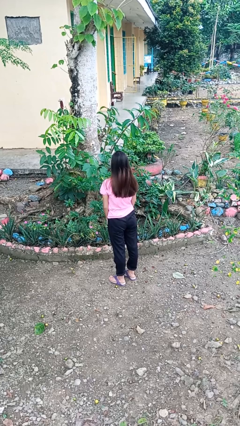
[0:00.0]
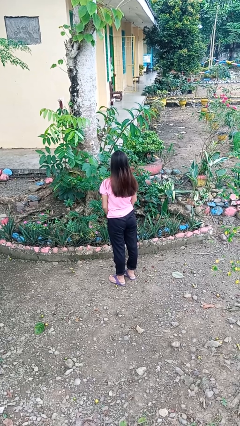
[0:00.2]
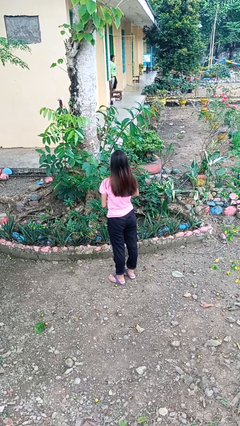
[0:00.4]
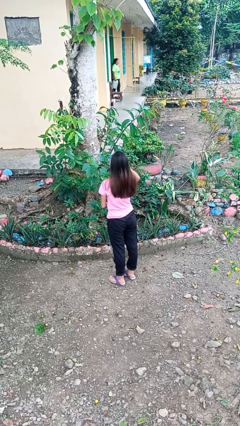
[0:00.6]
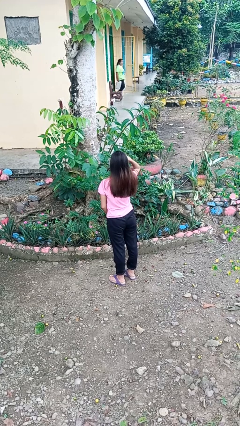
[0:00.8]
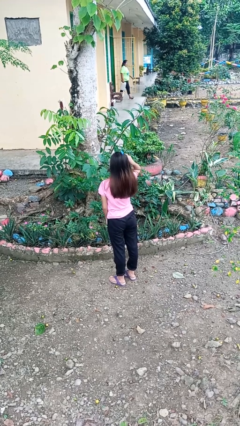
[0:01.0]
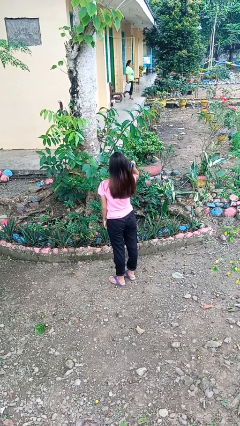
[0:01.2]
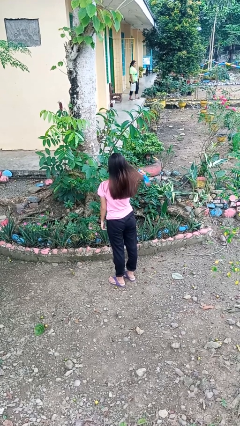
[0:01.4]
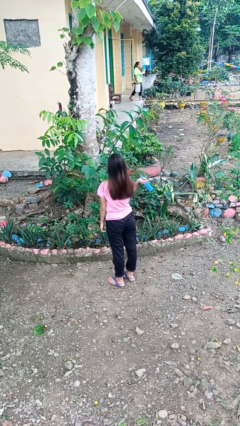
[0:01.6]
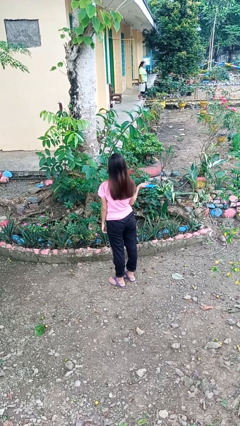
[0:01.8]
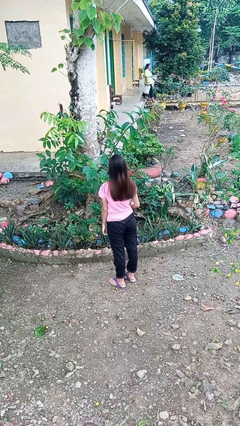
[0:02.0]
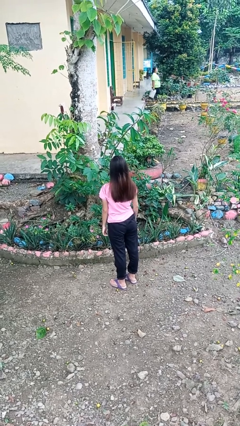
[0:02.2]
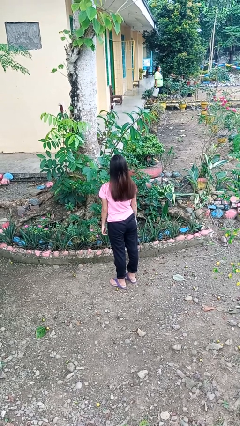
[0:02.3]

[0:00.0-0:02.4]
person brushes hair

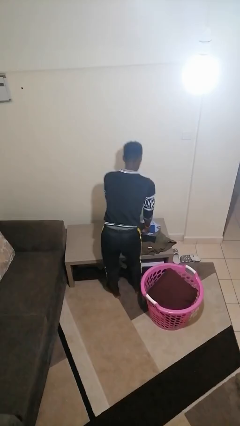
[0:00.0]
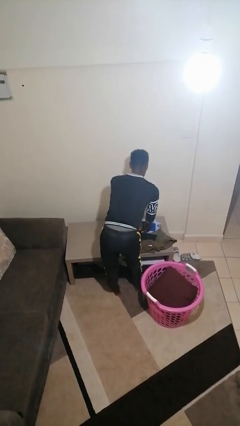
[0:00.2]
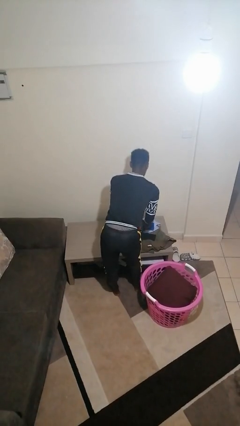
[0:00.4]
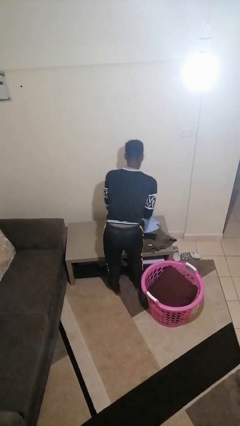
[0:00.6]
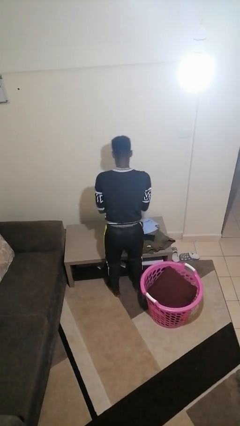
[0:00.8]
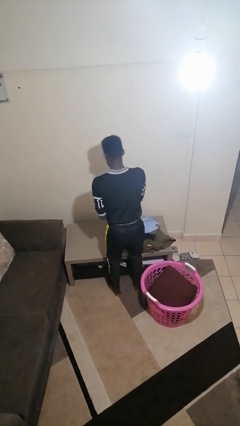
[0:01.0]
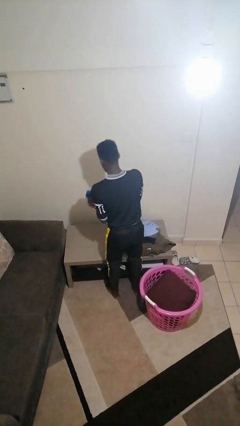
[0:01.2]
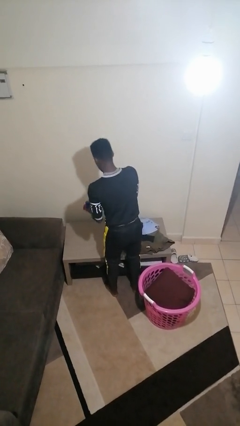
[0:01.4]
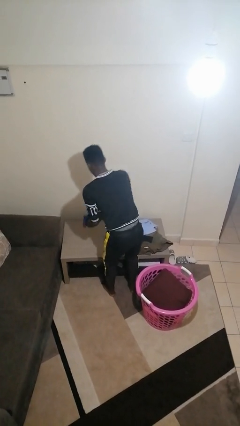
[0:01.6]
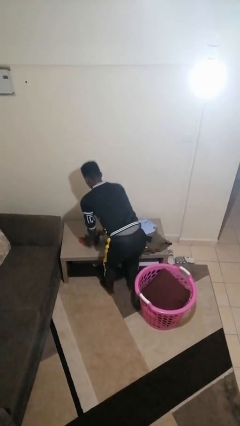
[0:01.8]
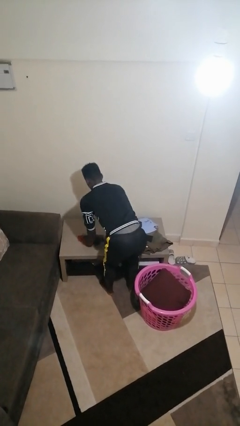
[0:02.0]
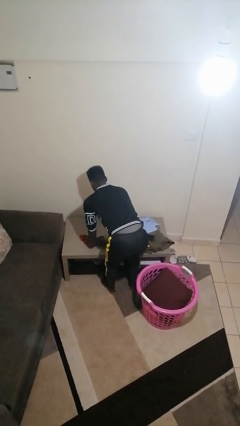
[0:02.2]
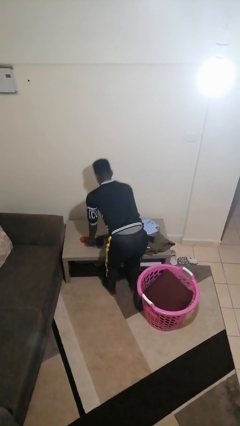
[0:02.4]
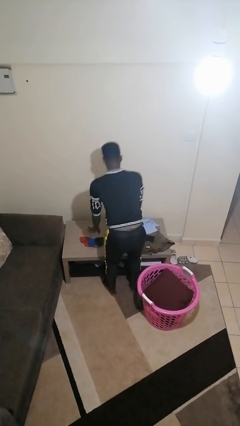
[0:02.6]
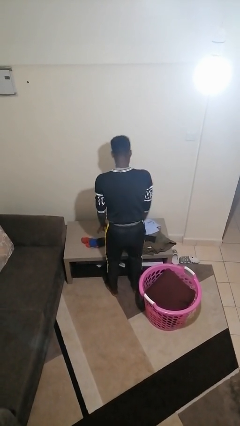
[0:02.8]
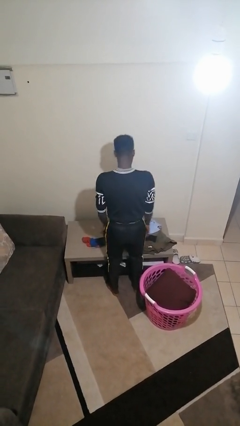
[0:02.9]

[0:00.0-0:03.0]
person folds socks

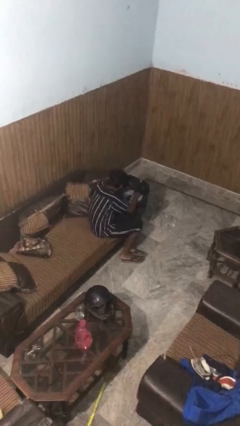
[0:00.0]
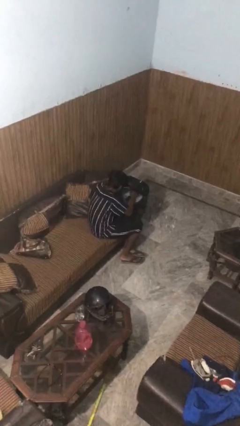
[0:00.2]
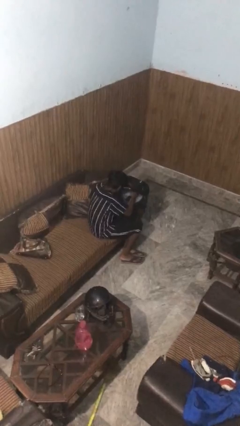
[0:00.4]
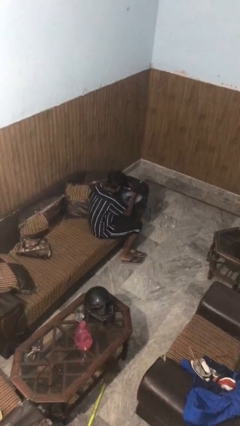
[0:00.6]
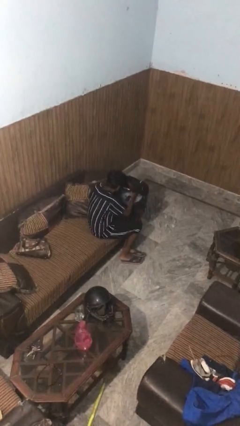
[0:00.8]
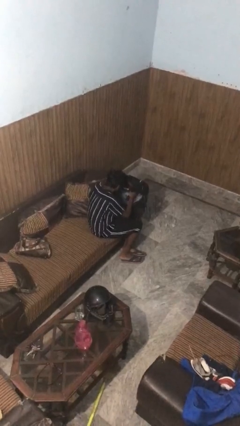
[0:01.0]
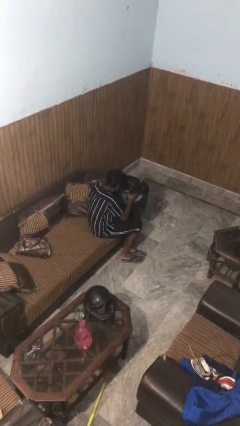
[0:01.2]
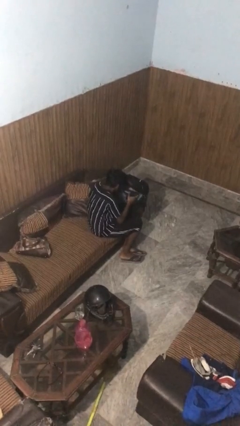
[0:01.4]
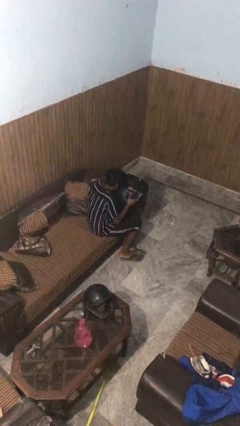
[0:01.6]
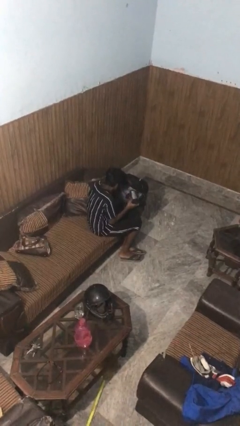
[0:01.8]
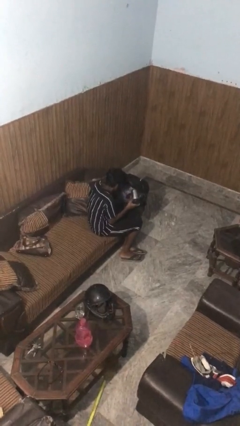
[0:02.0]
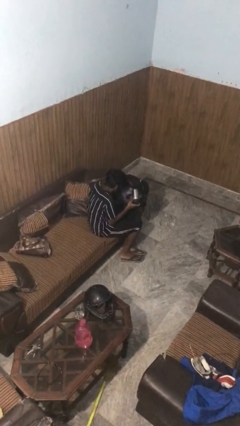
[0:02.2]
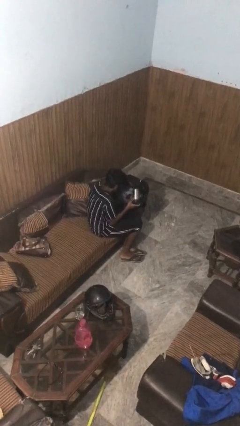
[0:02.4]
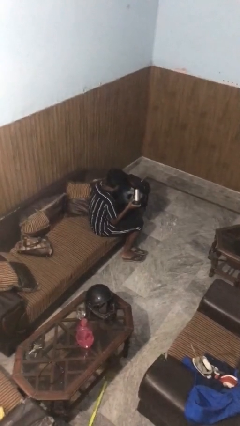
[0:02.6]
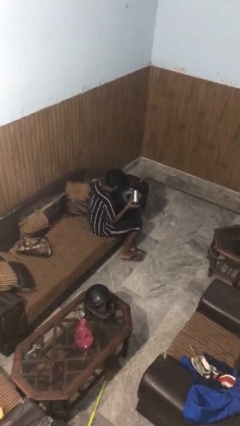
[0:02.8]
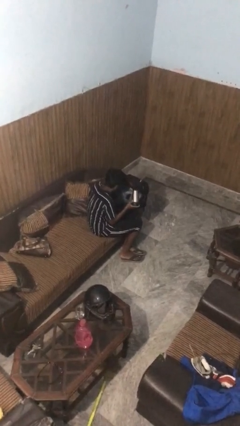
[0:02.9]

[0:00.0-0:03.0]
person takes object from backpack

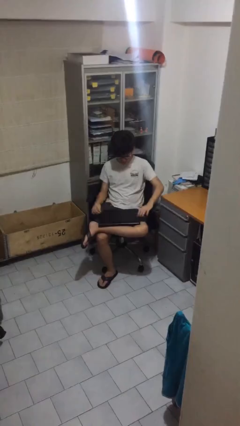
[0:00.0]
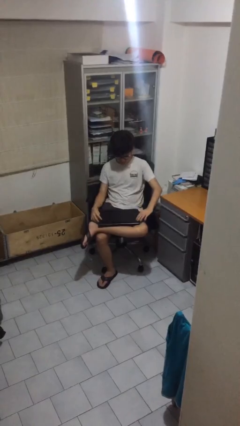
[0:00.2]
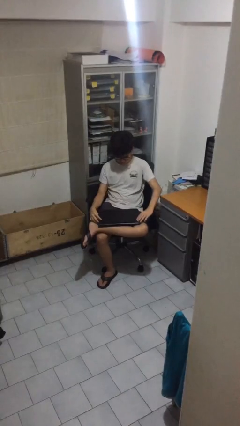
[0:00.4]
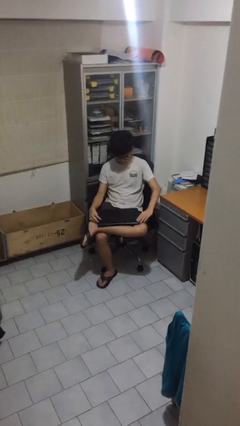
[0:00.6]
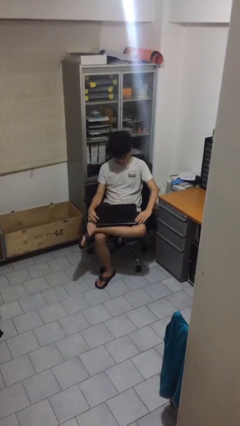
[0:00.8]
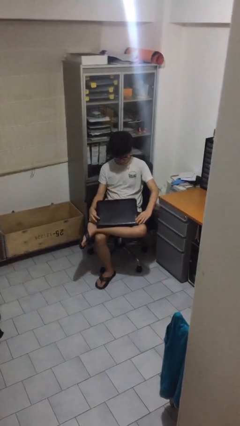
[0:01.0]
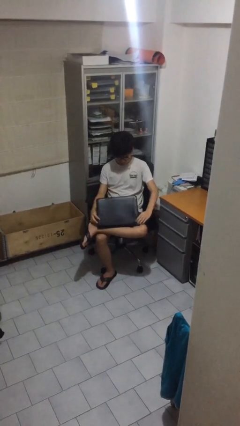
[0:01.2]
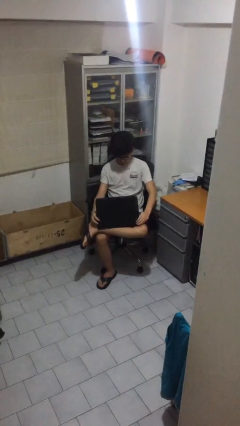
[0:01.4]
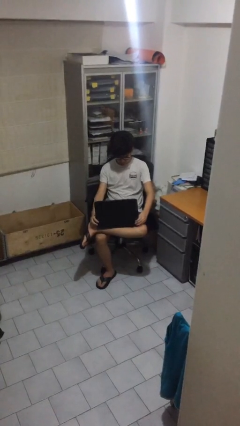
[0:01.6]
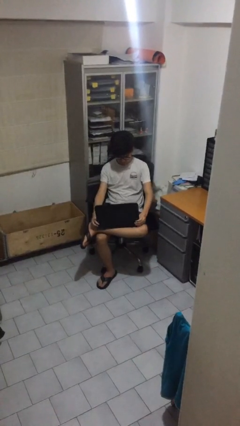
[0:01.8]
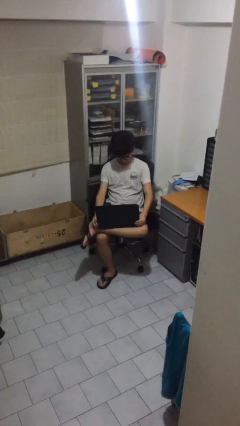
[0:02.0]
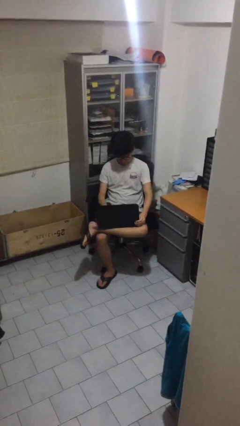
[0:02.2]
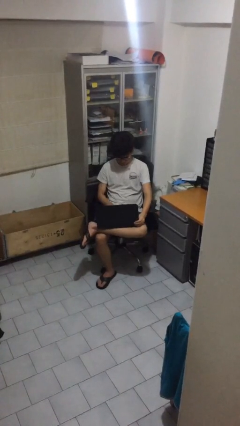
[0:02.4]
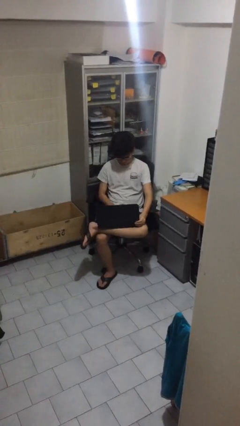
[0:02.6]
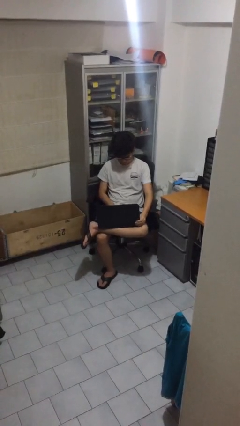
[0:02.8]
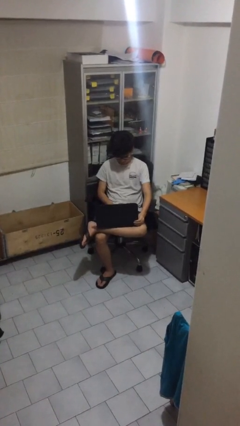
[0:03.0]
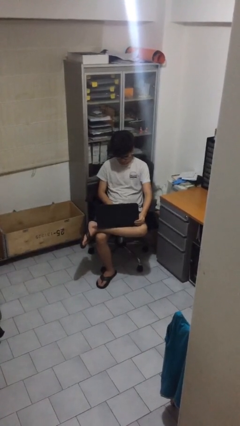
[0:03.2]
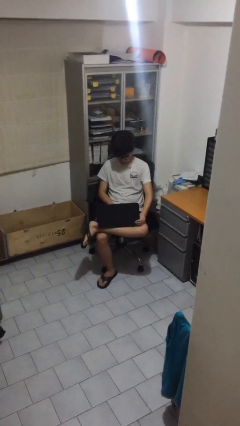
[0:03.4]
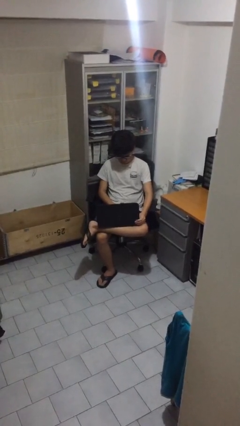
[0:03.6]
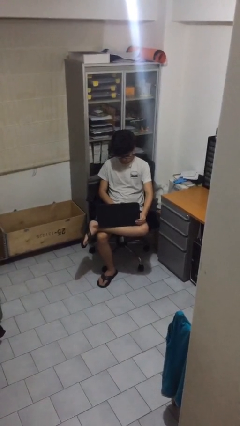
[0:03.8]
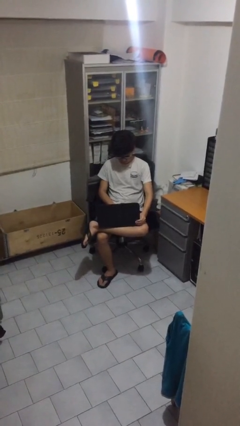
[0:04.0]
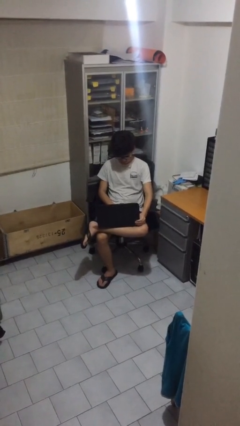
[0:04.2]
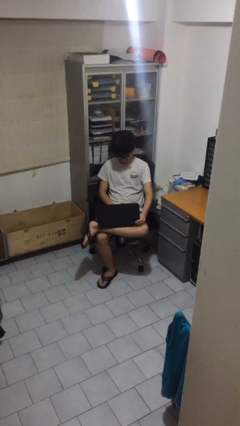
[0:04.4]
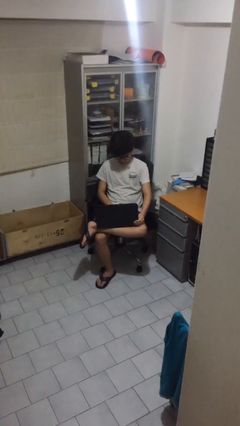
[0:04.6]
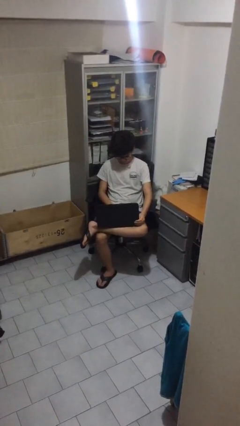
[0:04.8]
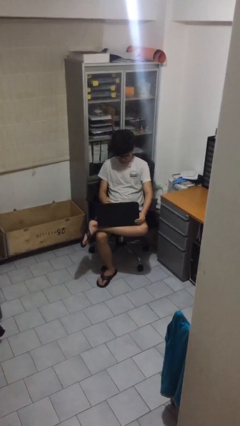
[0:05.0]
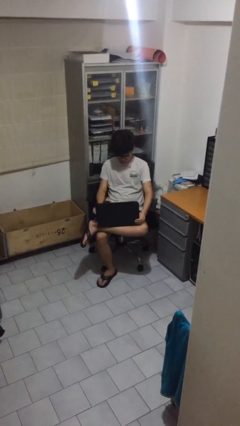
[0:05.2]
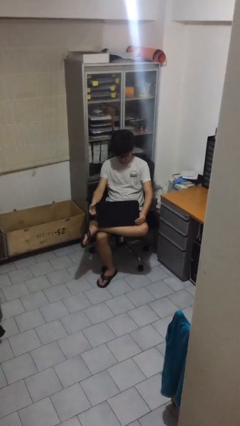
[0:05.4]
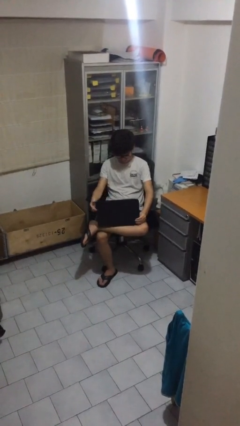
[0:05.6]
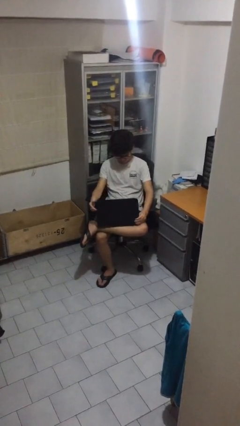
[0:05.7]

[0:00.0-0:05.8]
person interacts with laptop

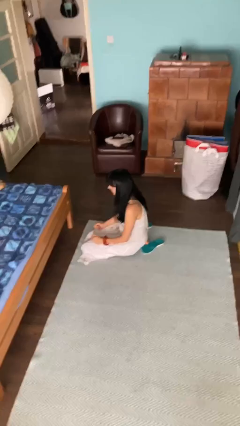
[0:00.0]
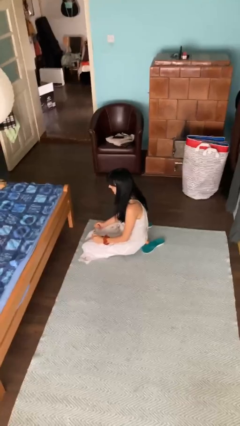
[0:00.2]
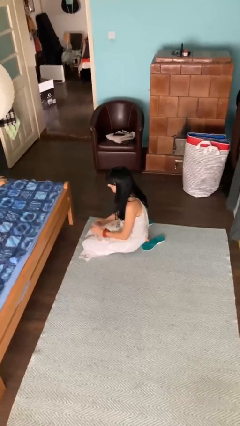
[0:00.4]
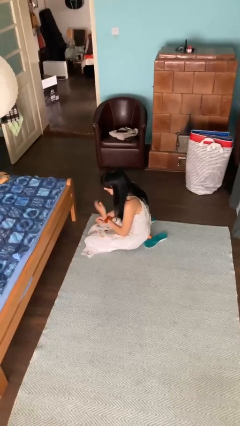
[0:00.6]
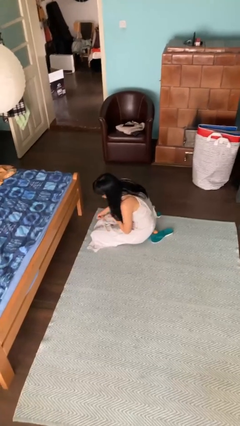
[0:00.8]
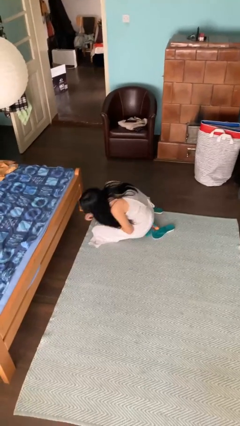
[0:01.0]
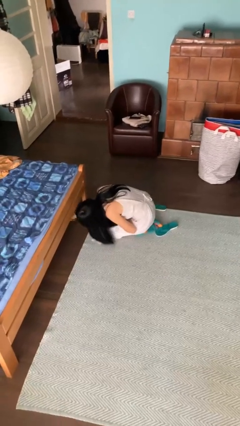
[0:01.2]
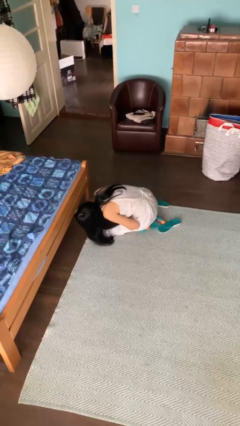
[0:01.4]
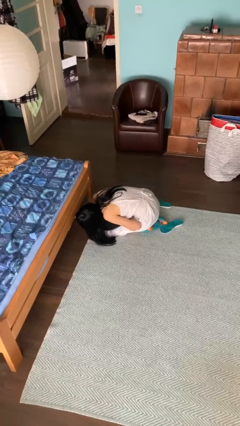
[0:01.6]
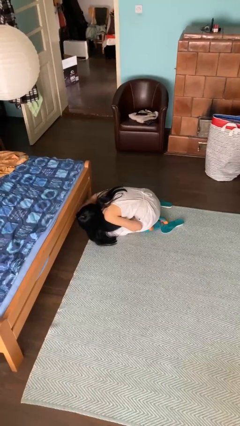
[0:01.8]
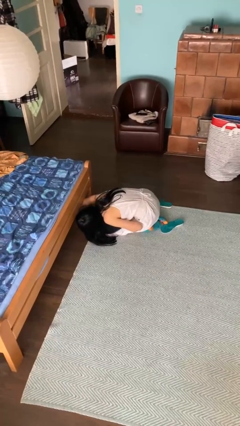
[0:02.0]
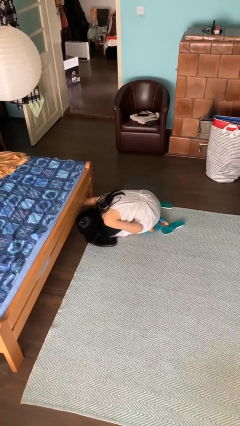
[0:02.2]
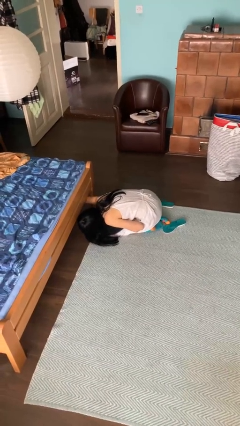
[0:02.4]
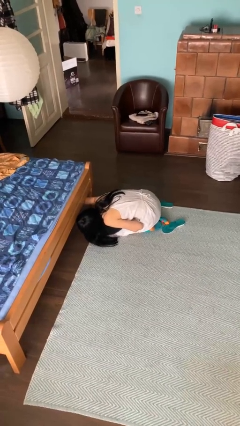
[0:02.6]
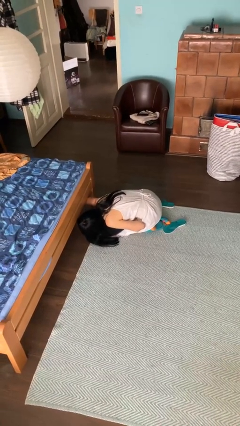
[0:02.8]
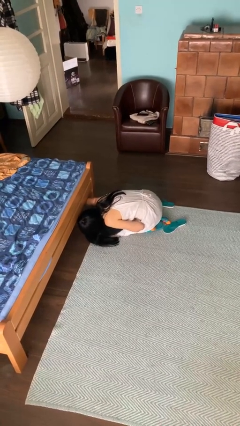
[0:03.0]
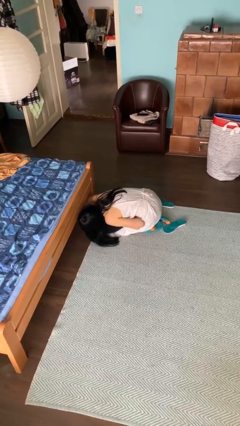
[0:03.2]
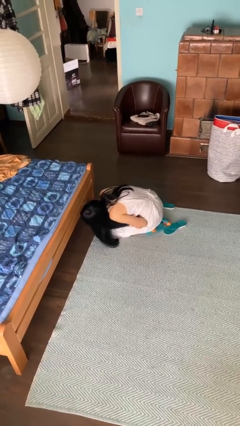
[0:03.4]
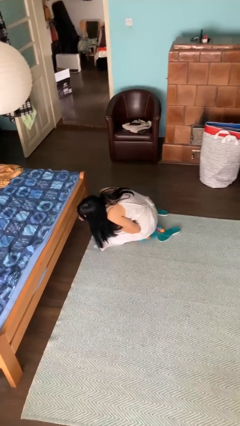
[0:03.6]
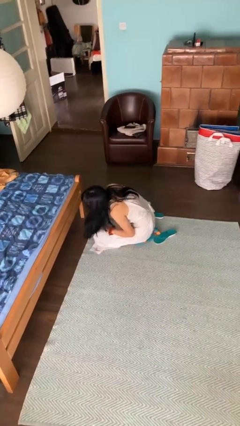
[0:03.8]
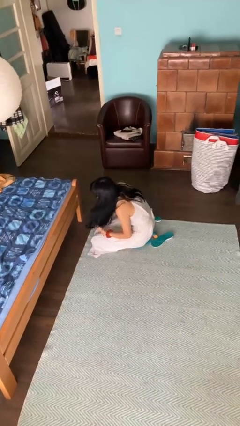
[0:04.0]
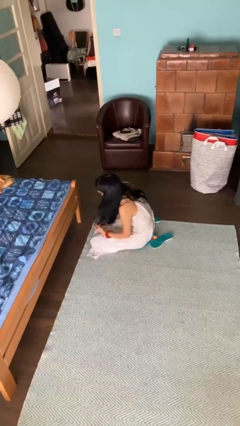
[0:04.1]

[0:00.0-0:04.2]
person searches under bed
